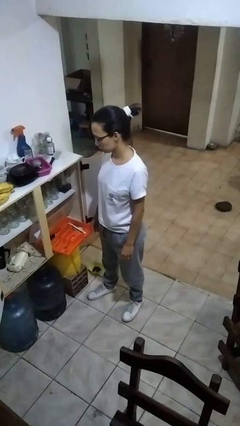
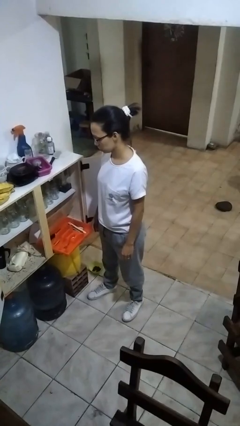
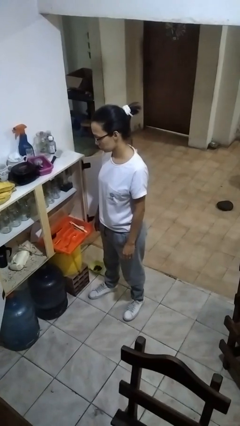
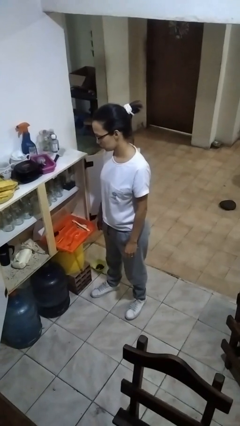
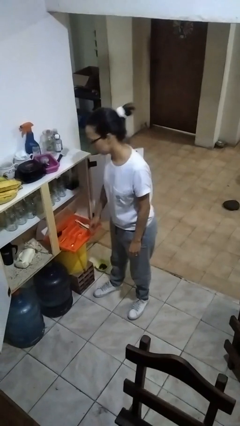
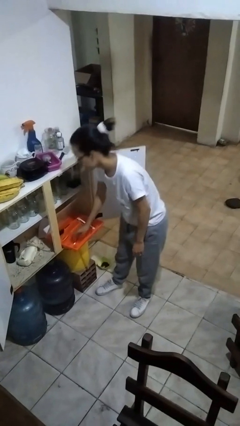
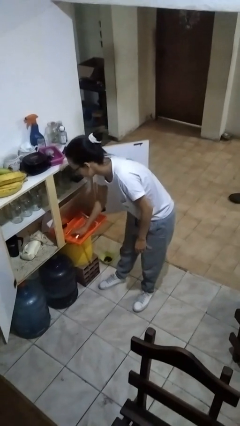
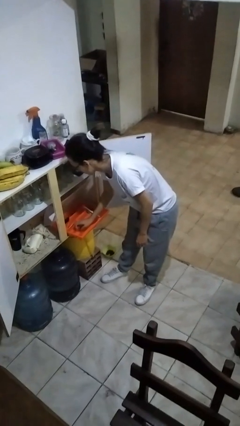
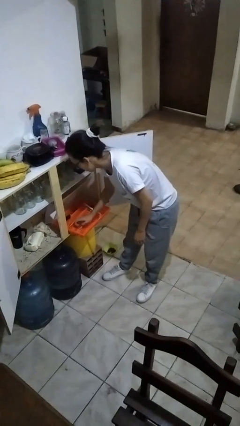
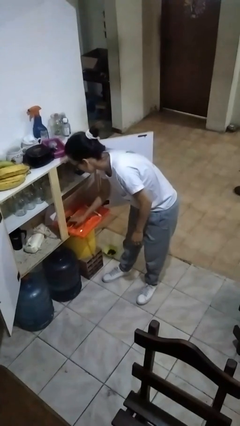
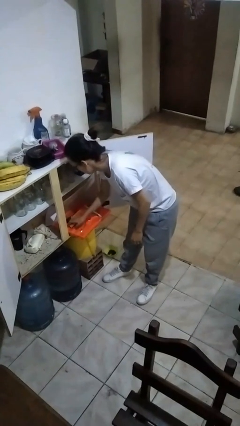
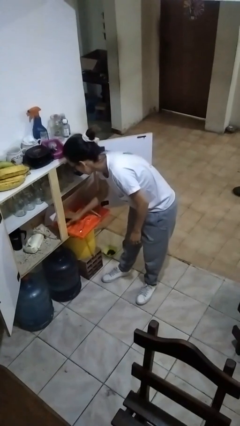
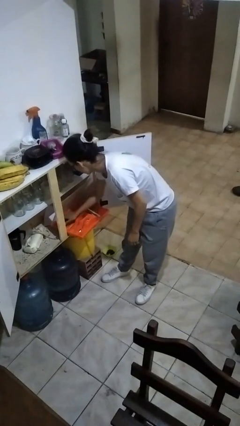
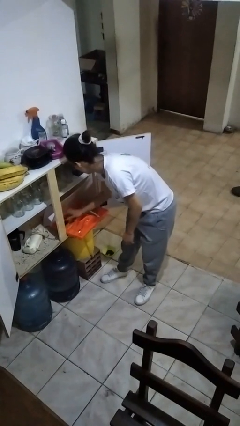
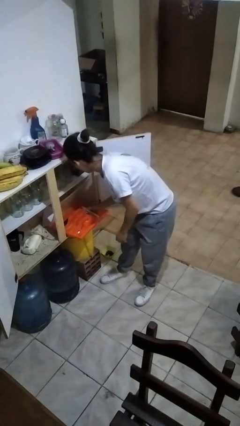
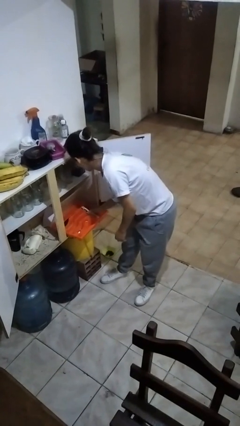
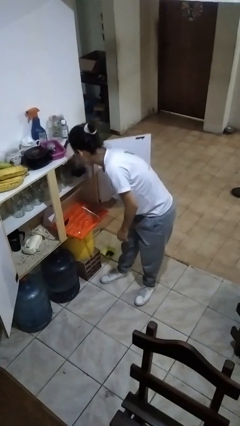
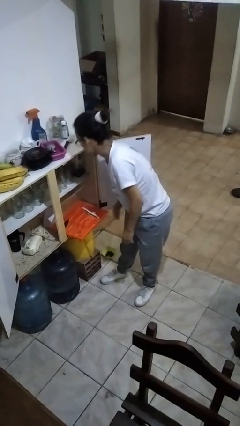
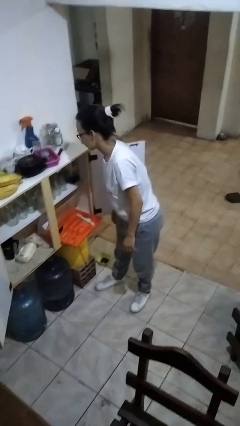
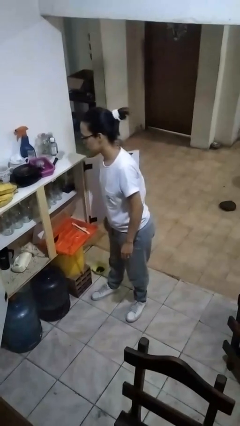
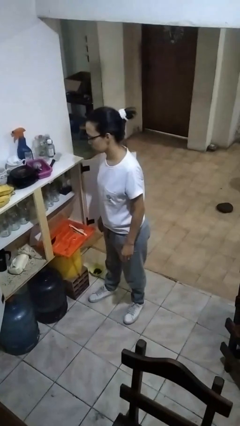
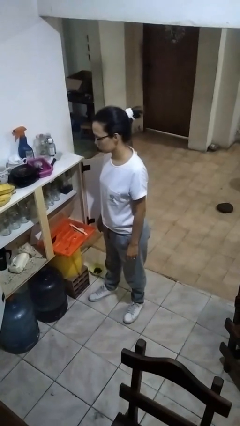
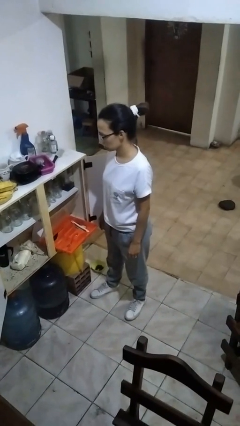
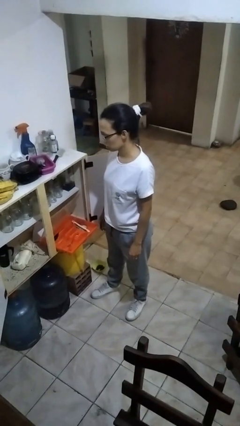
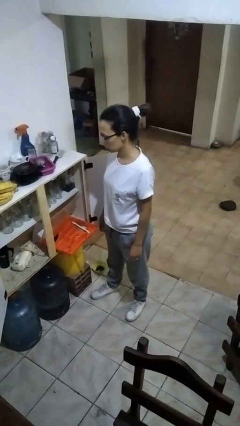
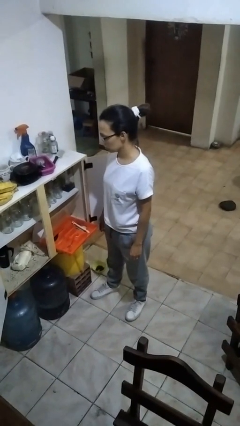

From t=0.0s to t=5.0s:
person searches in kitchen drawer

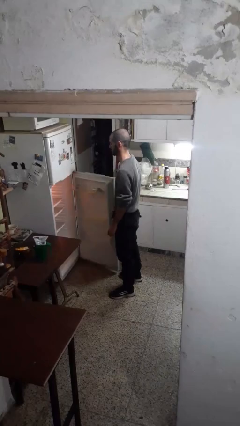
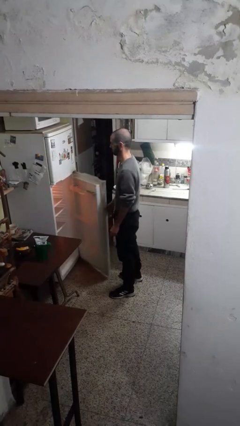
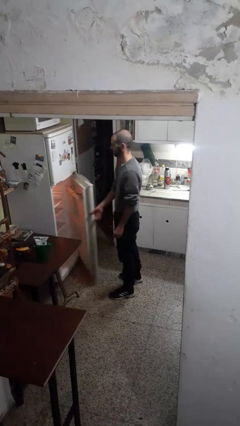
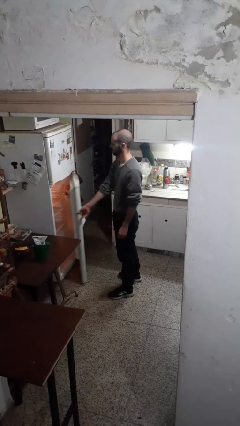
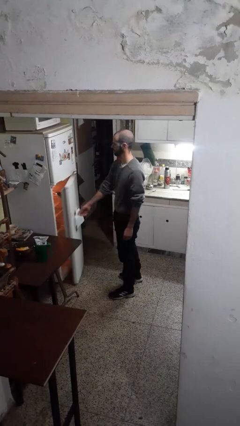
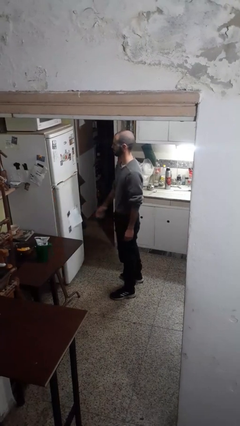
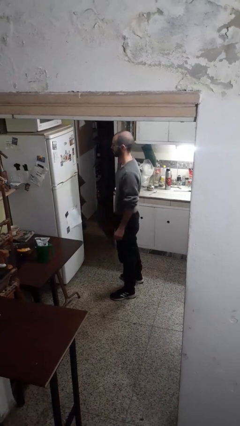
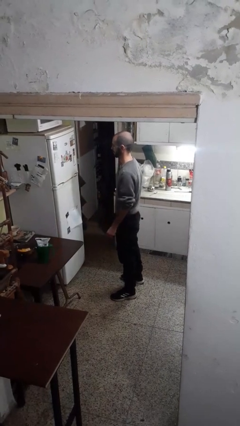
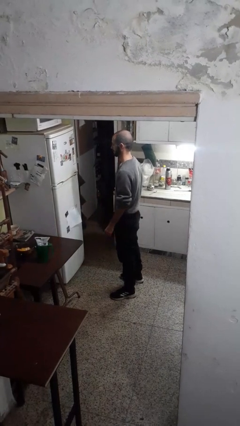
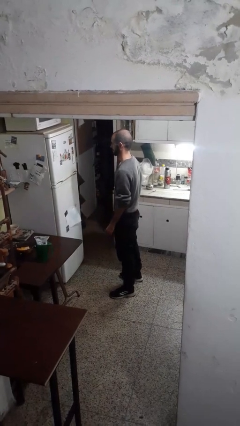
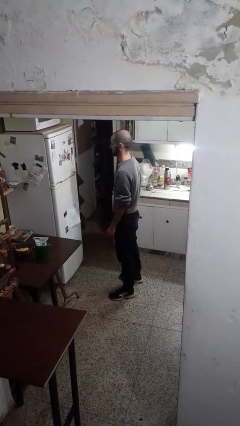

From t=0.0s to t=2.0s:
person closes refrigerator

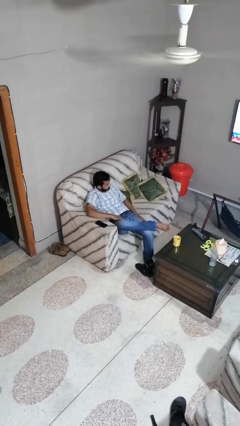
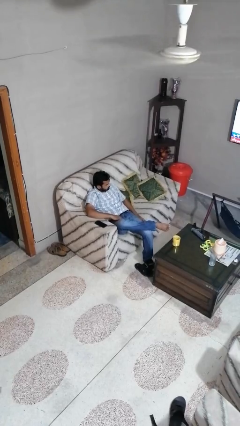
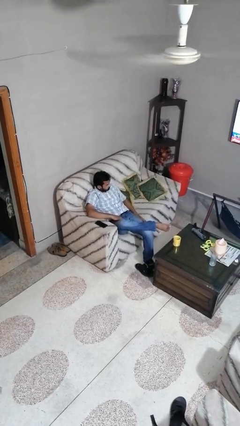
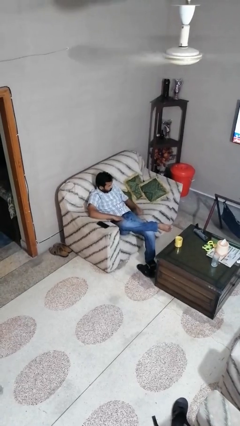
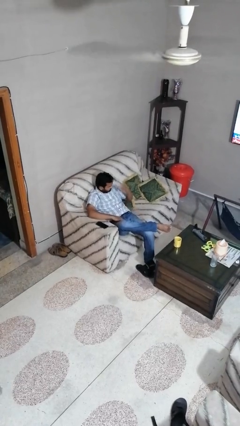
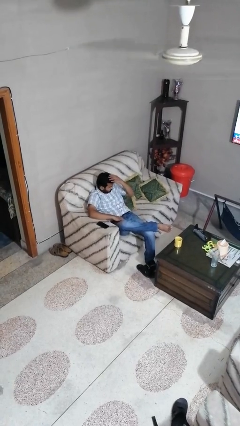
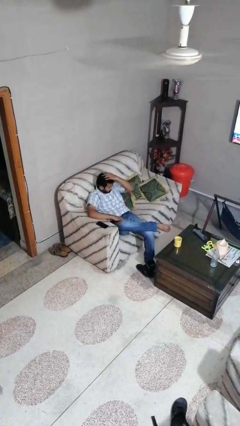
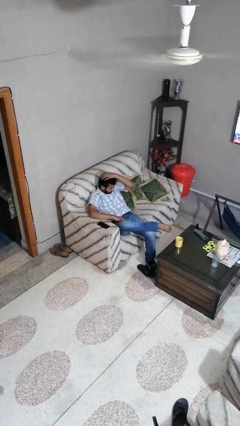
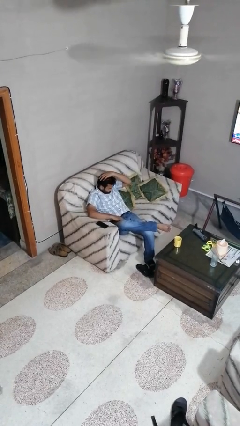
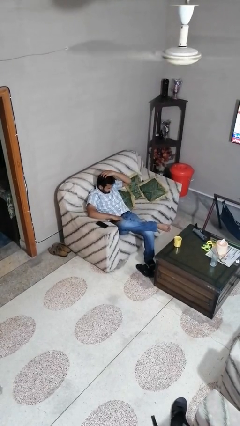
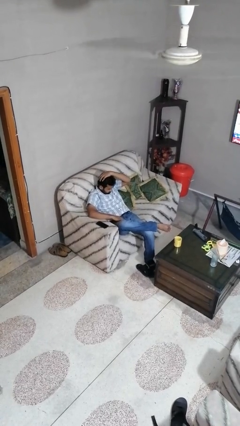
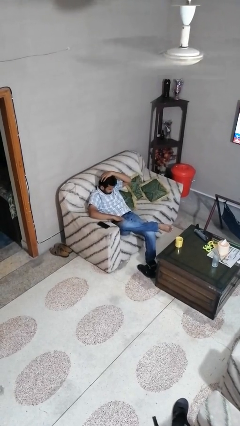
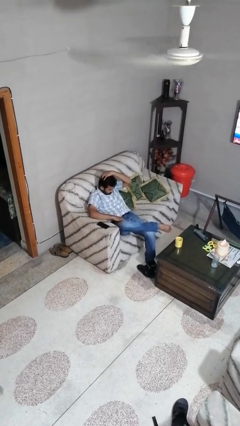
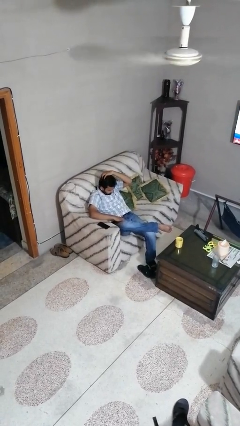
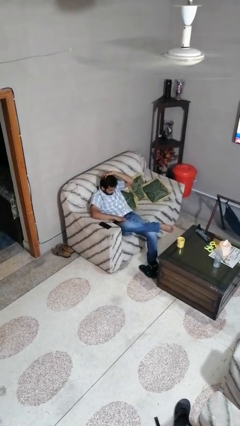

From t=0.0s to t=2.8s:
person strokes hair

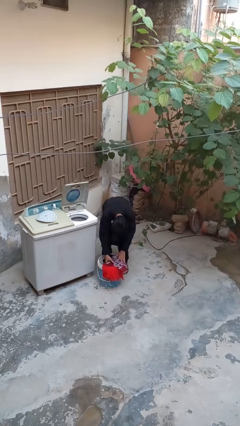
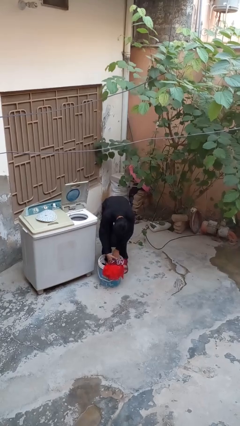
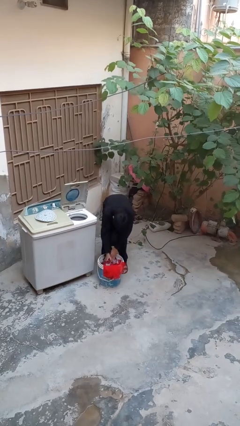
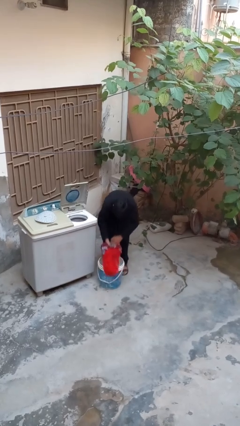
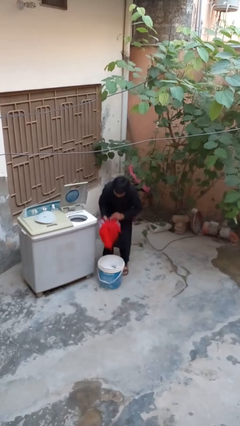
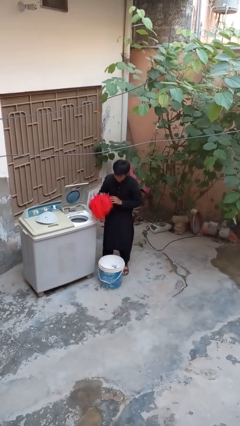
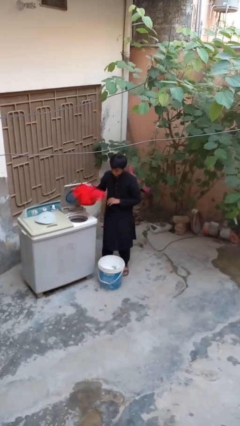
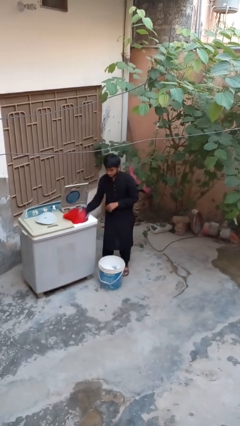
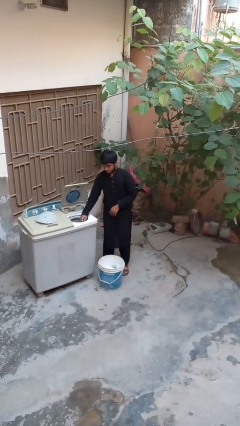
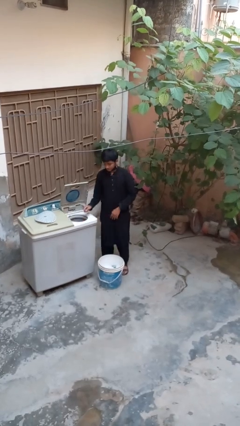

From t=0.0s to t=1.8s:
person loads dryer

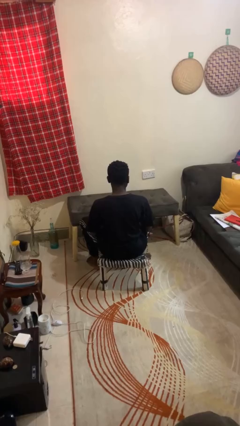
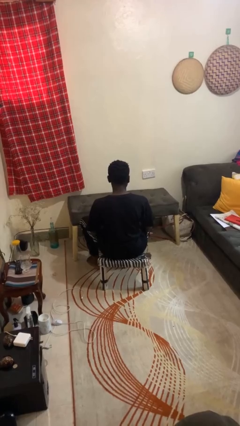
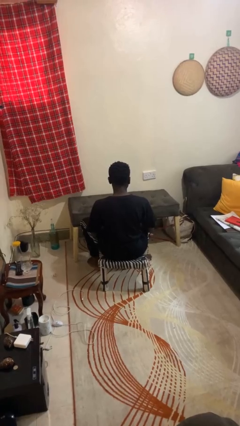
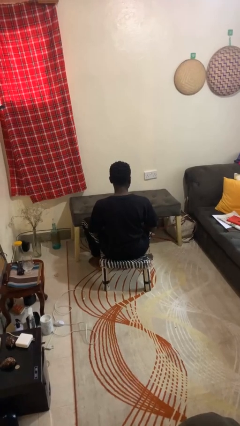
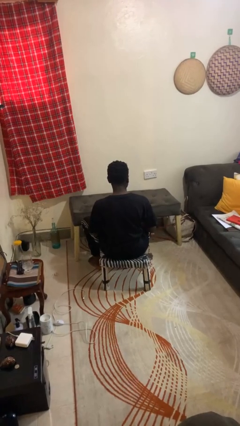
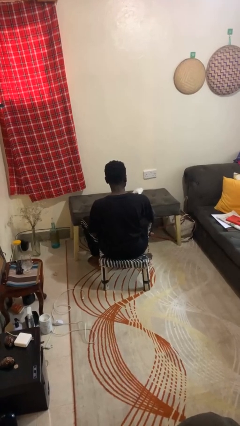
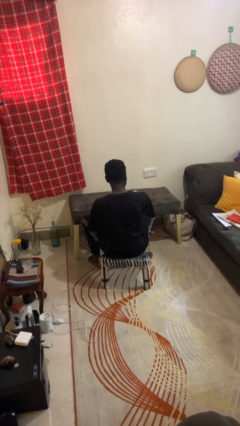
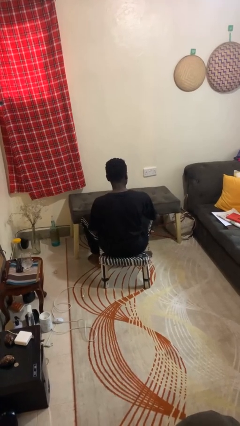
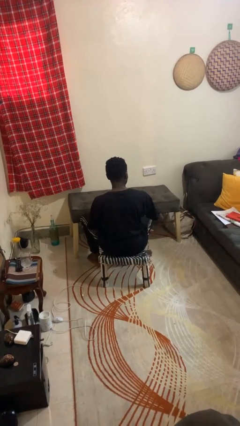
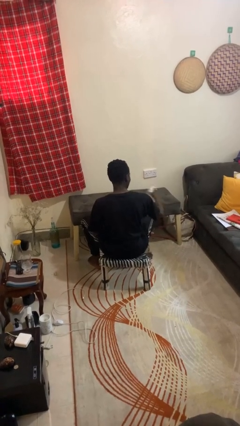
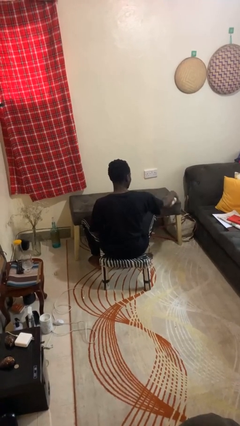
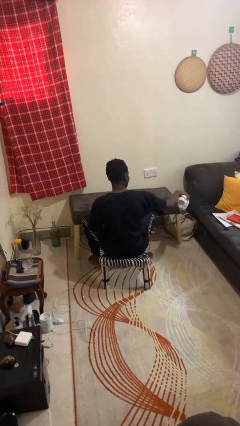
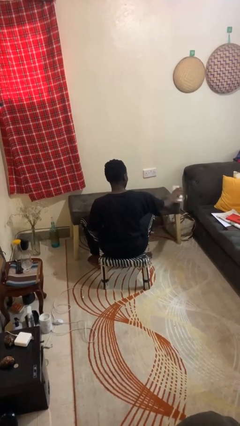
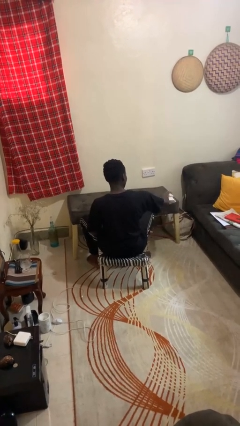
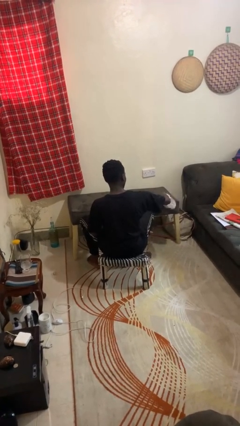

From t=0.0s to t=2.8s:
person cleans table with rag

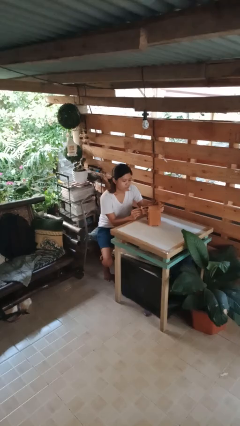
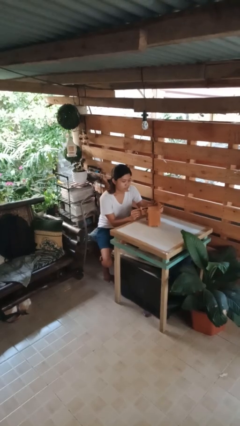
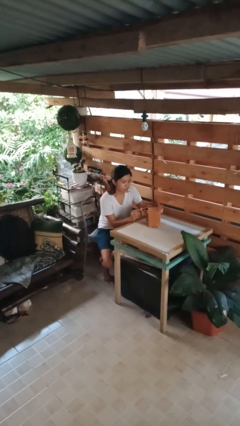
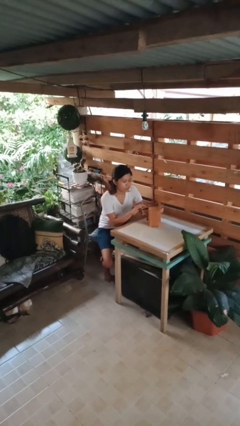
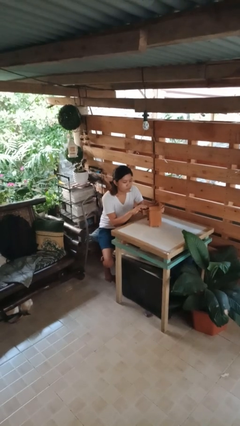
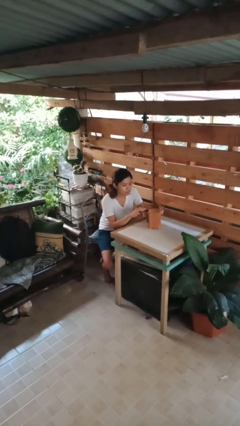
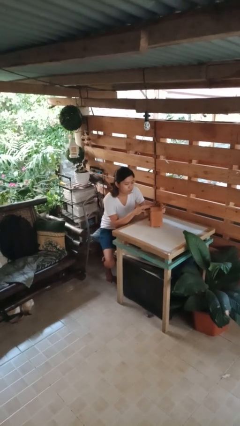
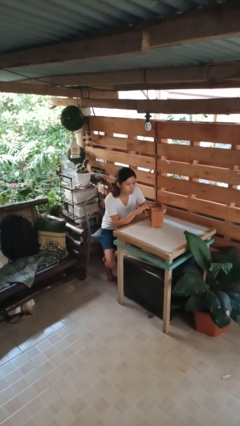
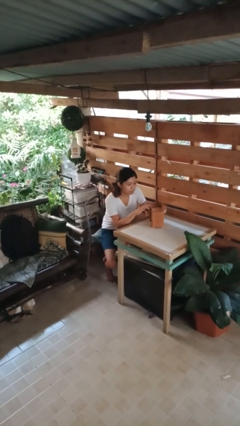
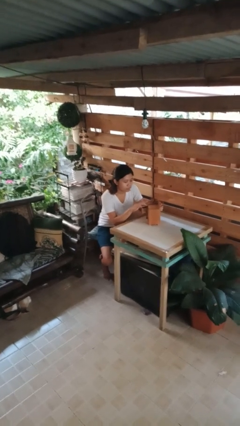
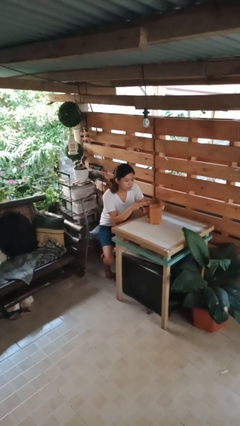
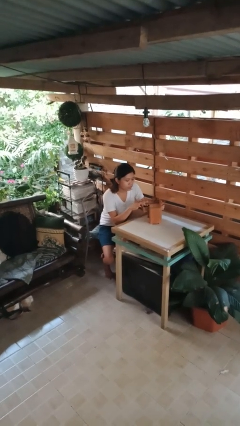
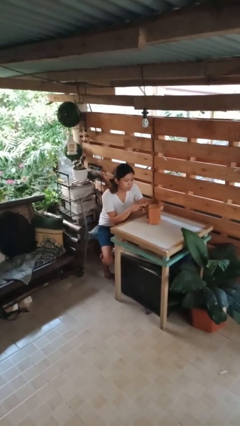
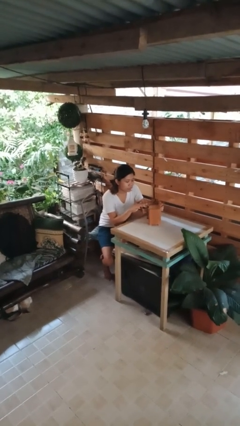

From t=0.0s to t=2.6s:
person searches jewelry box

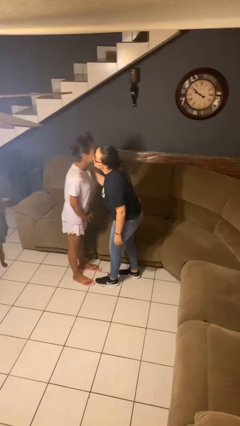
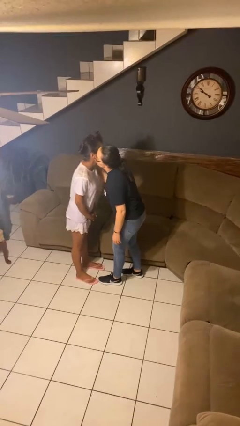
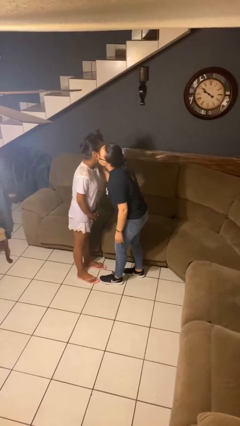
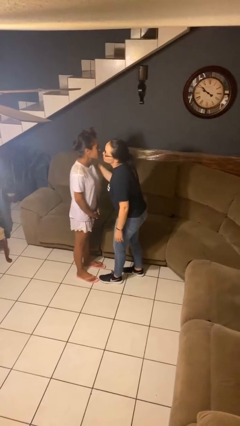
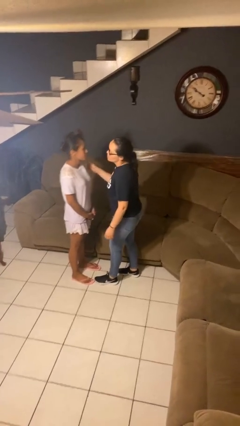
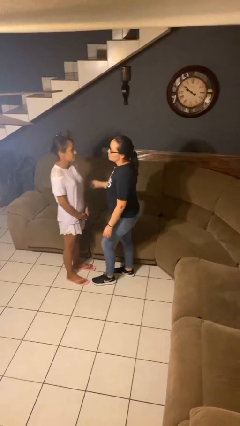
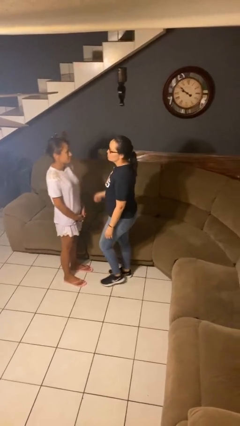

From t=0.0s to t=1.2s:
person kisses cheek of person
